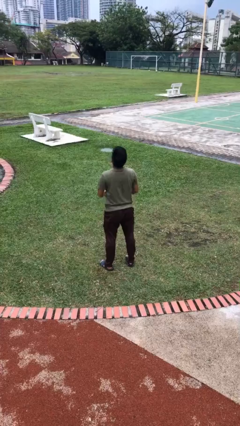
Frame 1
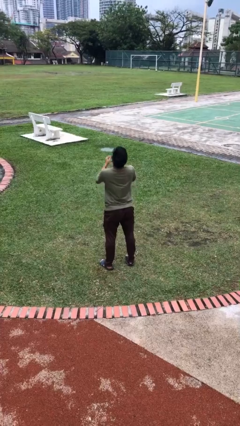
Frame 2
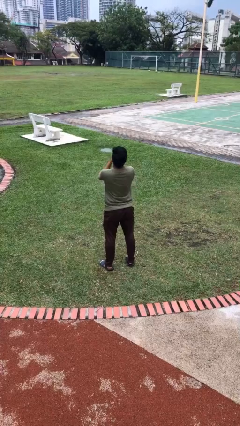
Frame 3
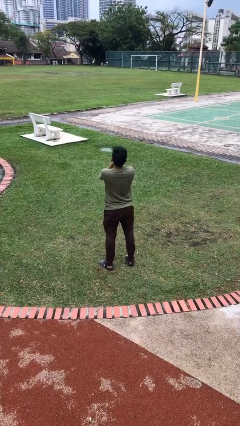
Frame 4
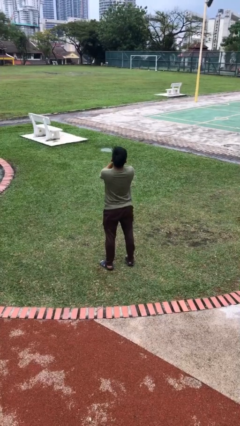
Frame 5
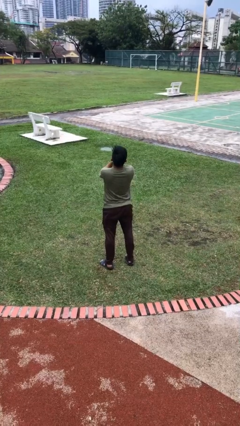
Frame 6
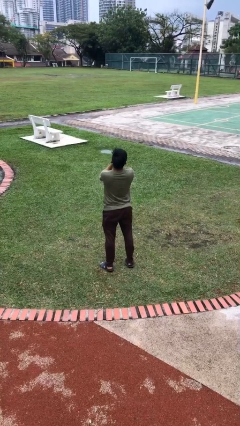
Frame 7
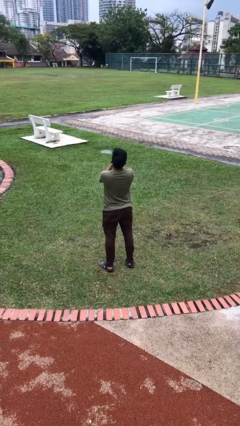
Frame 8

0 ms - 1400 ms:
person sneezes into hand

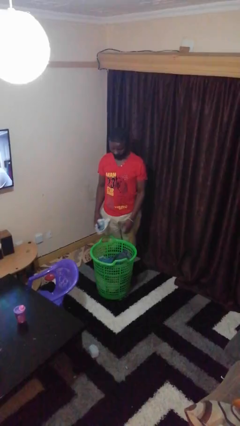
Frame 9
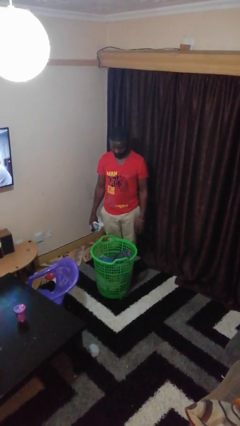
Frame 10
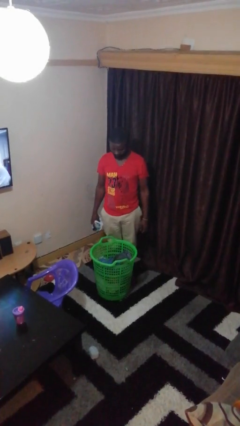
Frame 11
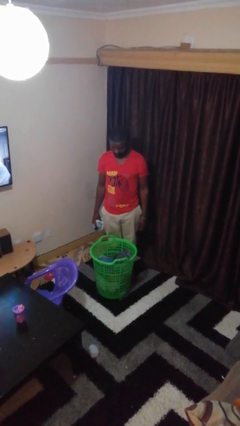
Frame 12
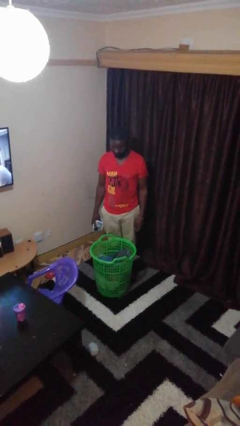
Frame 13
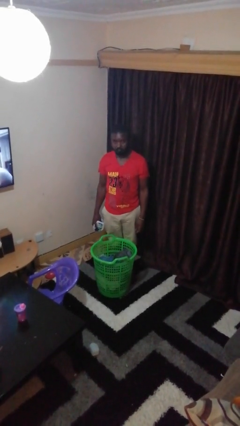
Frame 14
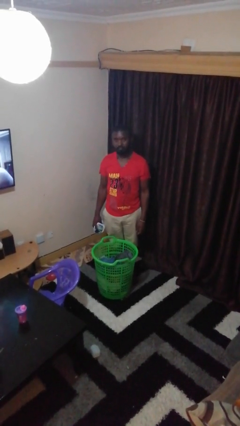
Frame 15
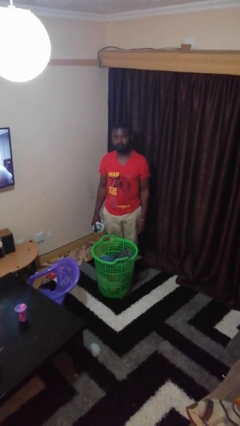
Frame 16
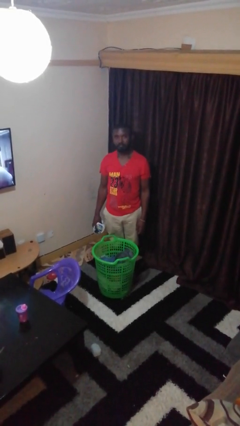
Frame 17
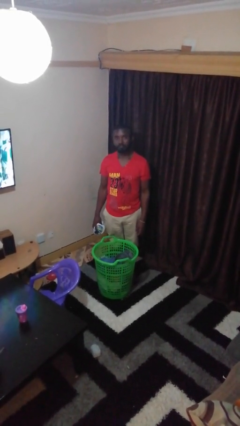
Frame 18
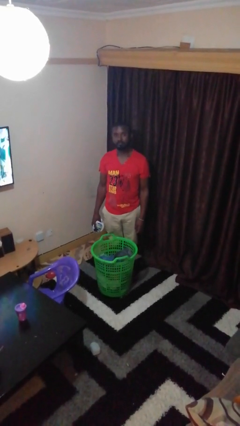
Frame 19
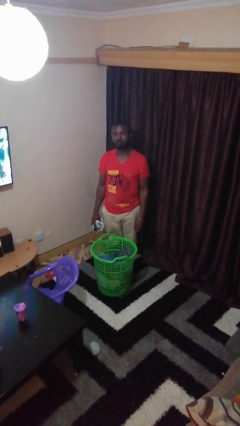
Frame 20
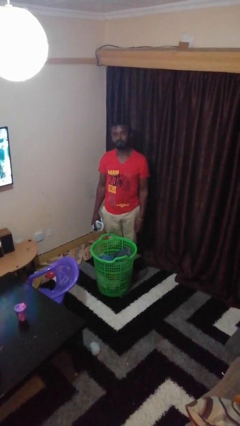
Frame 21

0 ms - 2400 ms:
person takes object from basket

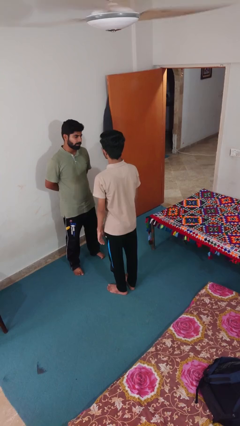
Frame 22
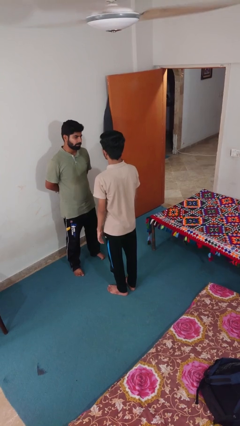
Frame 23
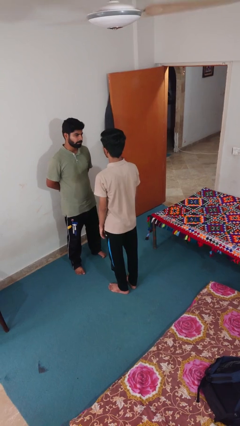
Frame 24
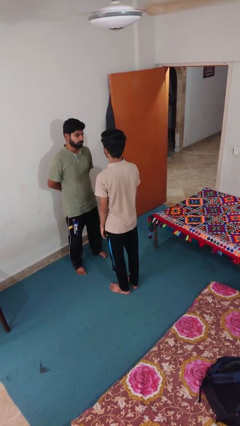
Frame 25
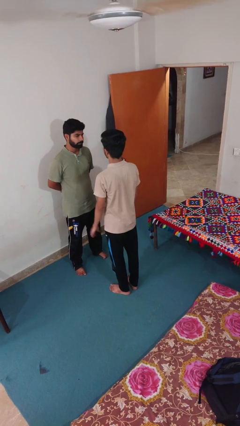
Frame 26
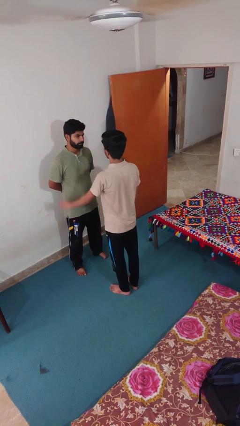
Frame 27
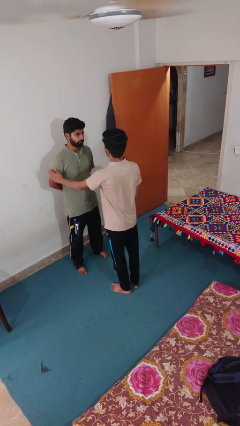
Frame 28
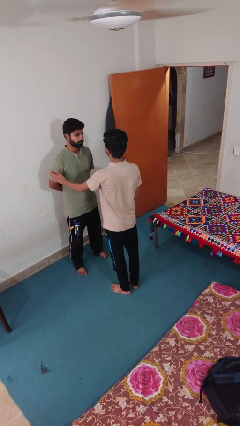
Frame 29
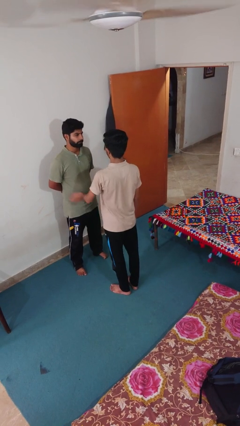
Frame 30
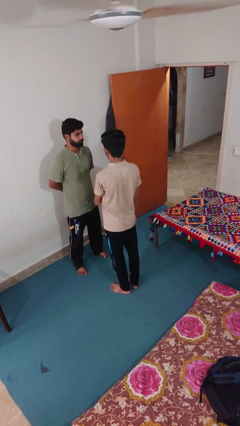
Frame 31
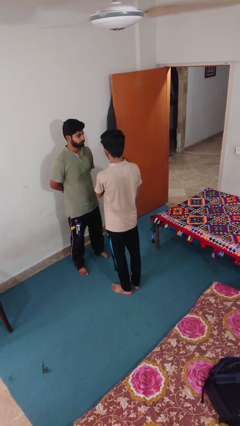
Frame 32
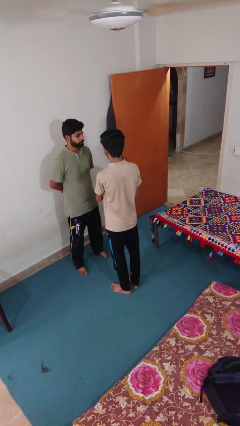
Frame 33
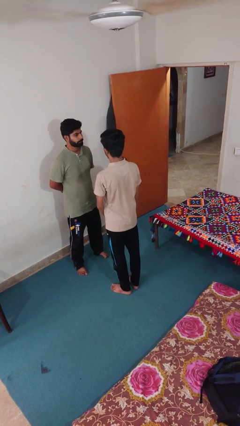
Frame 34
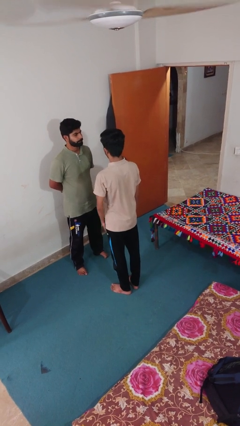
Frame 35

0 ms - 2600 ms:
person shoves person

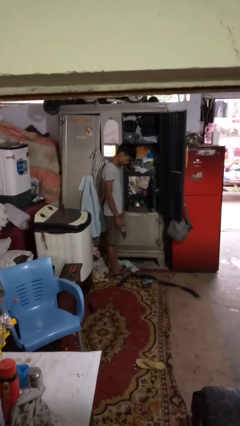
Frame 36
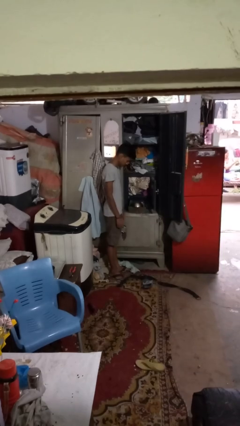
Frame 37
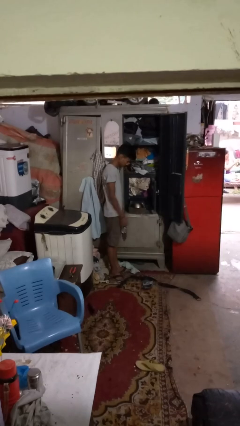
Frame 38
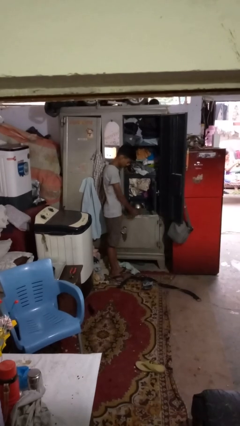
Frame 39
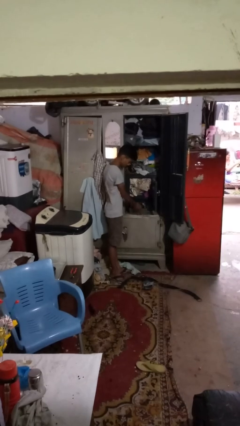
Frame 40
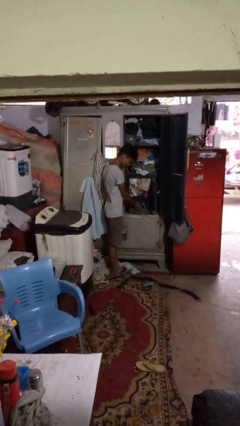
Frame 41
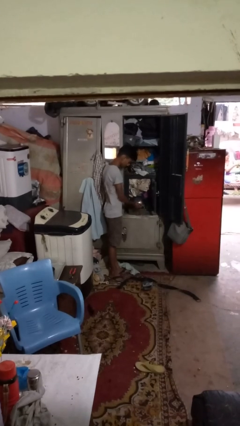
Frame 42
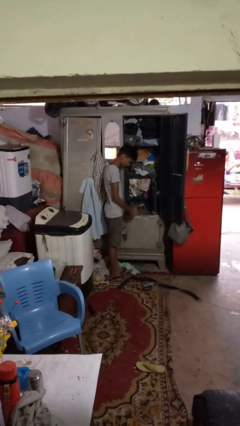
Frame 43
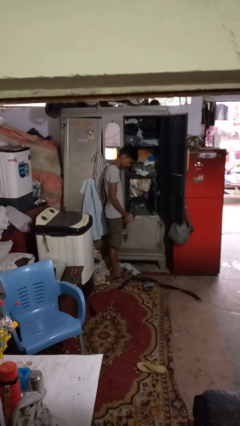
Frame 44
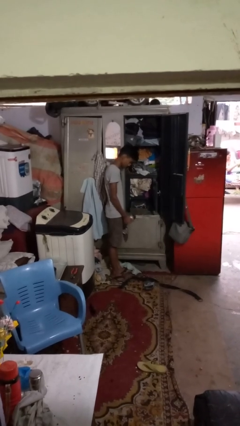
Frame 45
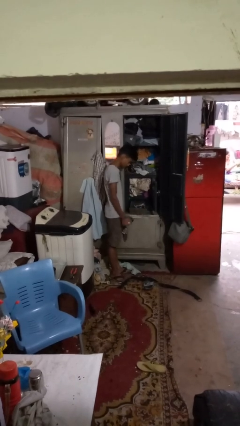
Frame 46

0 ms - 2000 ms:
person takes clothes from dresser

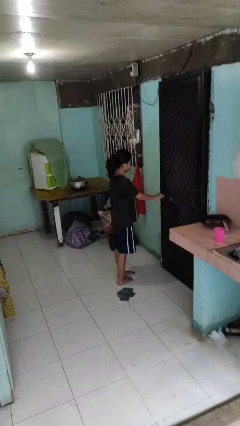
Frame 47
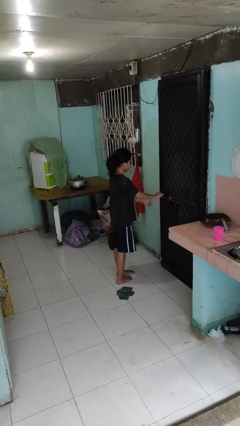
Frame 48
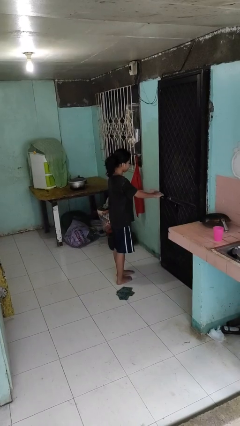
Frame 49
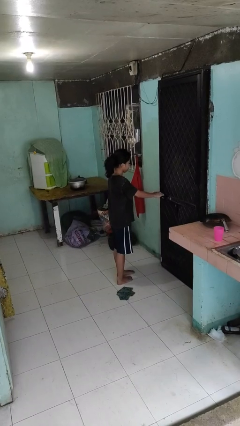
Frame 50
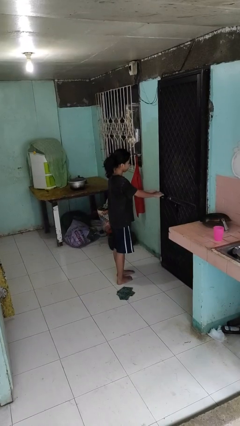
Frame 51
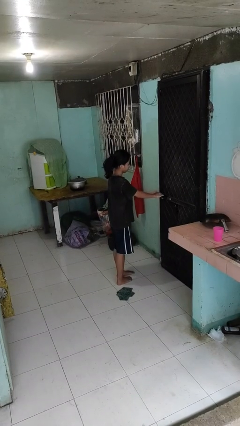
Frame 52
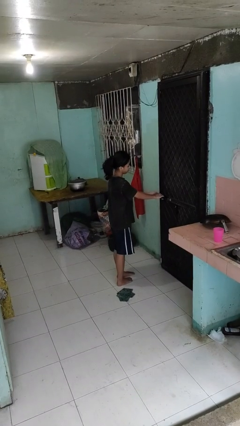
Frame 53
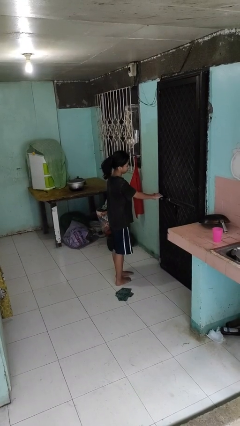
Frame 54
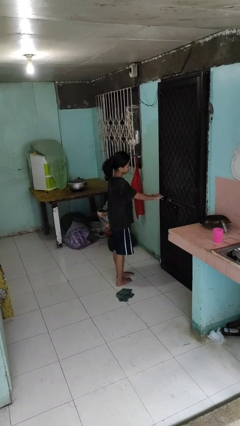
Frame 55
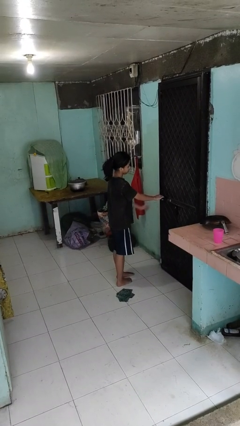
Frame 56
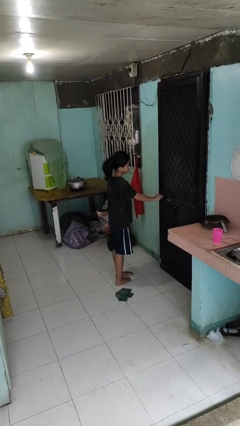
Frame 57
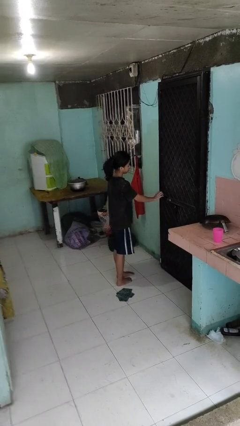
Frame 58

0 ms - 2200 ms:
person locks door with keys

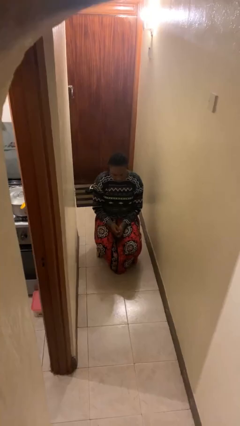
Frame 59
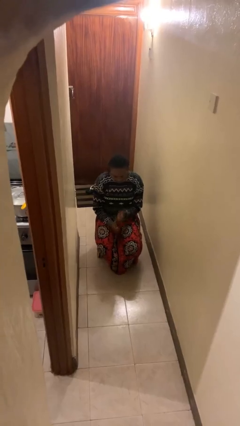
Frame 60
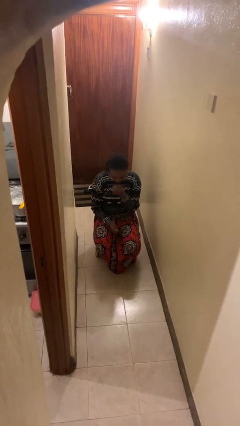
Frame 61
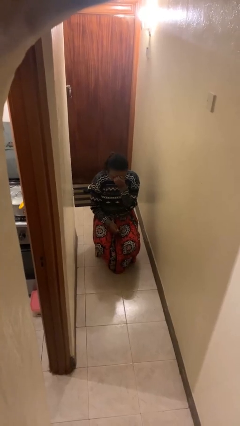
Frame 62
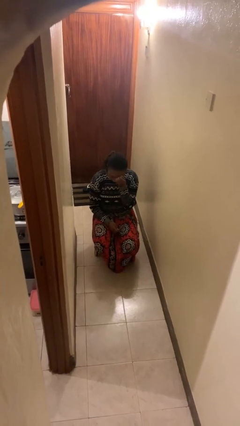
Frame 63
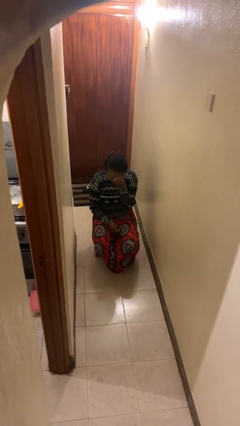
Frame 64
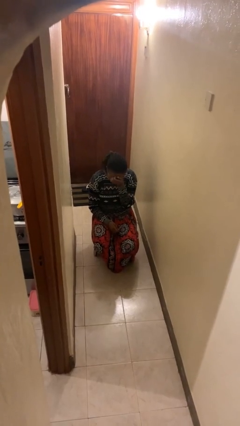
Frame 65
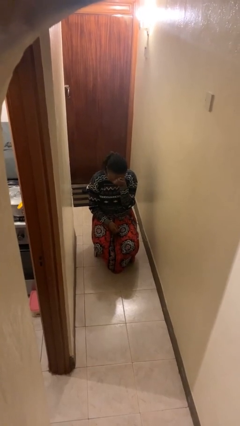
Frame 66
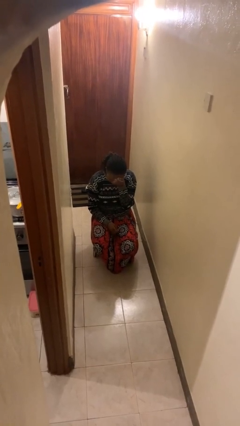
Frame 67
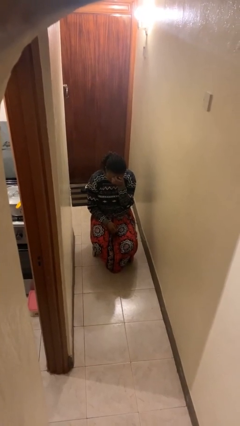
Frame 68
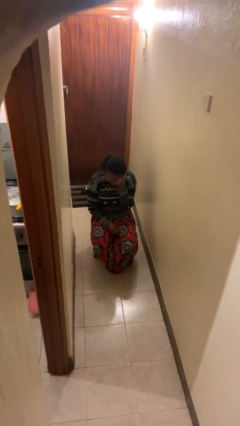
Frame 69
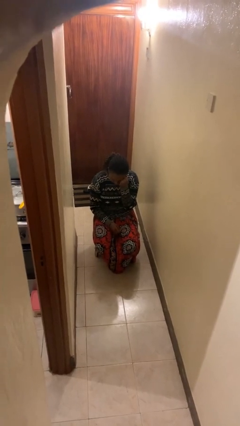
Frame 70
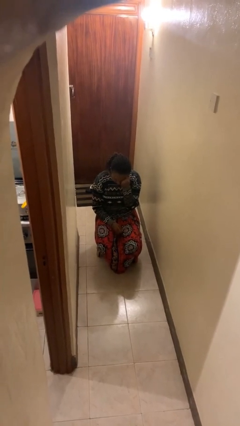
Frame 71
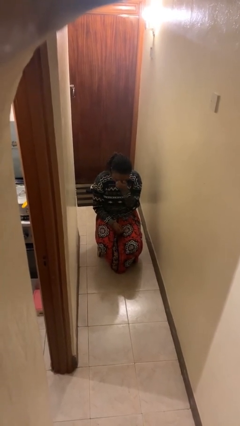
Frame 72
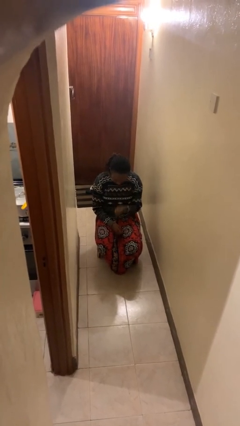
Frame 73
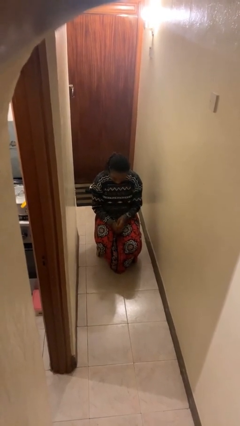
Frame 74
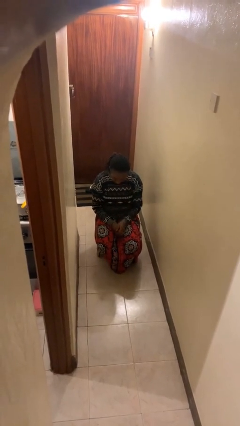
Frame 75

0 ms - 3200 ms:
person scratches face

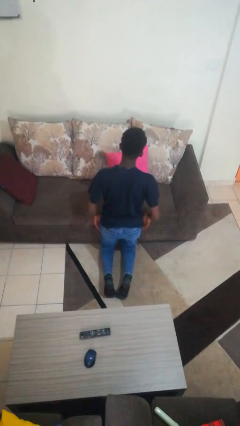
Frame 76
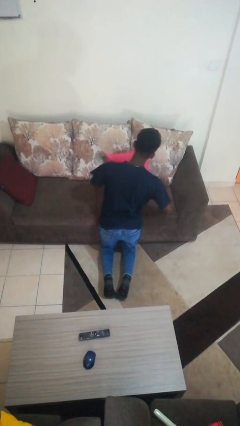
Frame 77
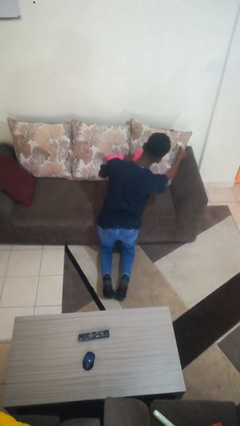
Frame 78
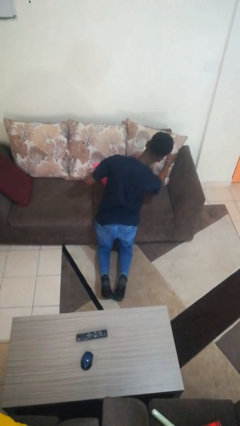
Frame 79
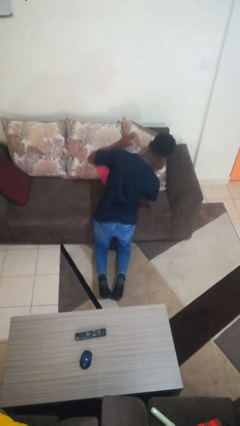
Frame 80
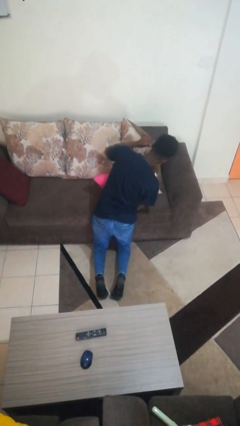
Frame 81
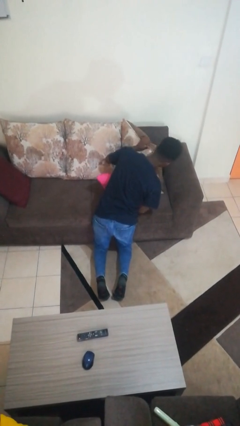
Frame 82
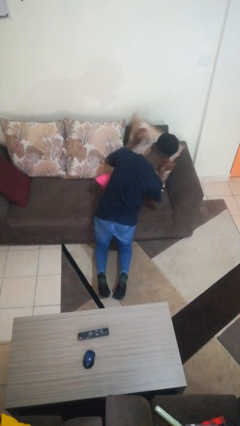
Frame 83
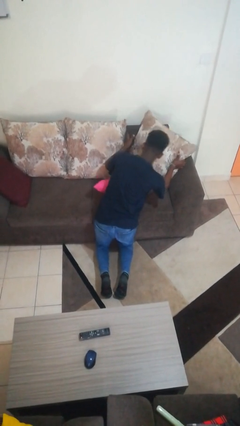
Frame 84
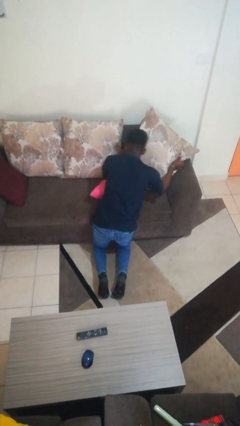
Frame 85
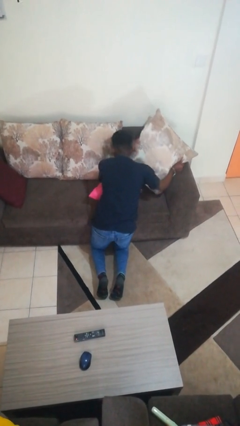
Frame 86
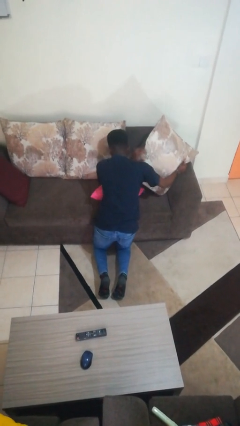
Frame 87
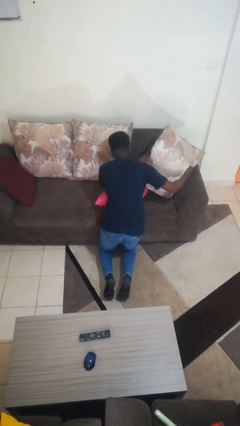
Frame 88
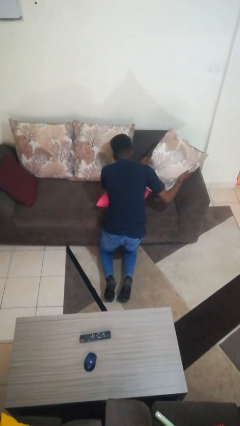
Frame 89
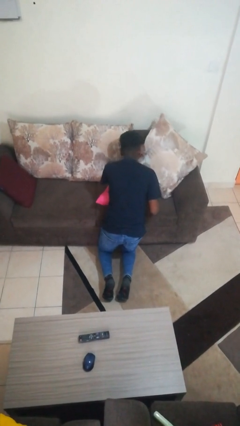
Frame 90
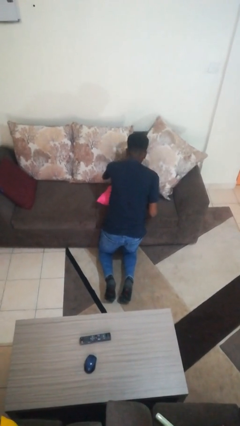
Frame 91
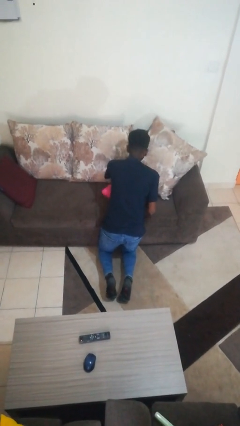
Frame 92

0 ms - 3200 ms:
person searches in couch

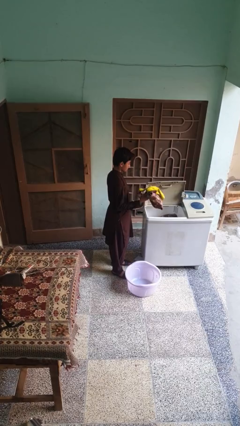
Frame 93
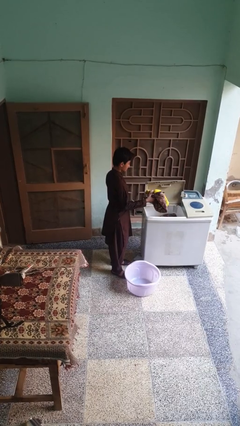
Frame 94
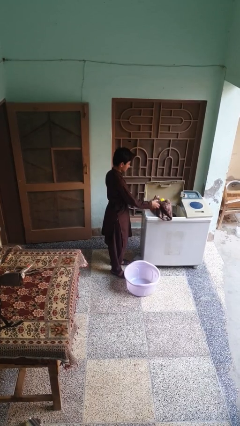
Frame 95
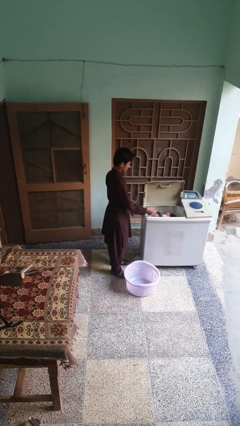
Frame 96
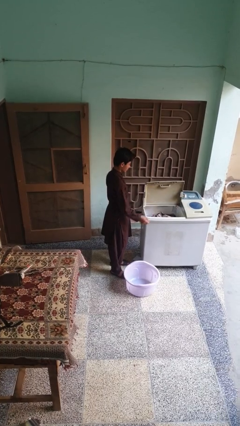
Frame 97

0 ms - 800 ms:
person unloads clotheswasher
